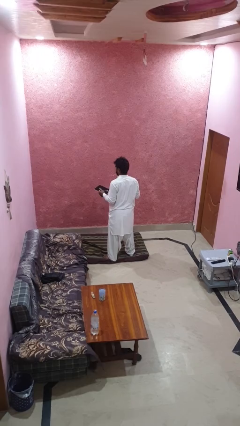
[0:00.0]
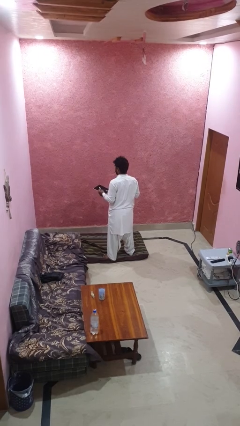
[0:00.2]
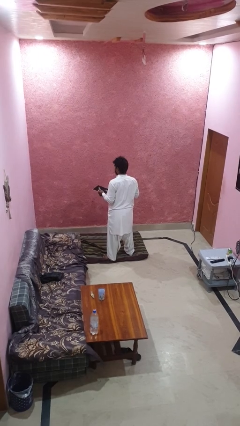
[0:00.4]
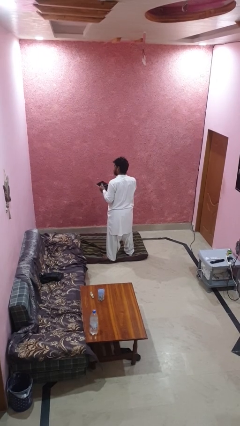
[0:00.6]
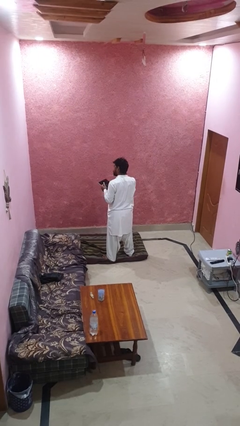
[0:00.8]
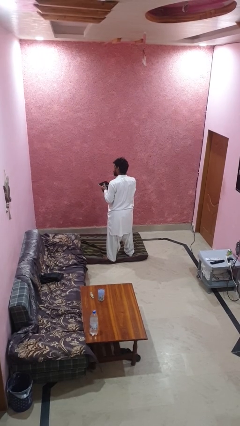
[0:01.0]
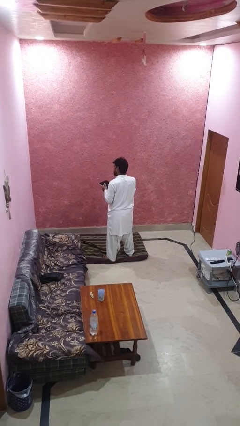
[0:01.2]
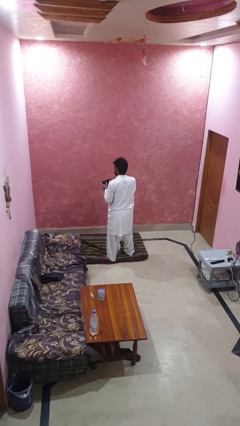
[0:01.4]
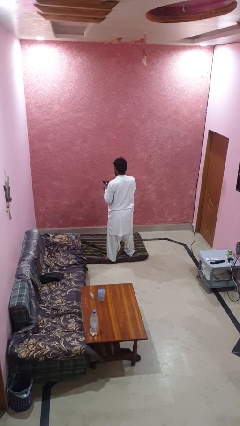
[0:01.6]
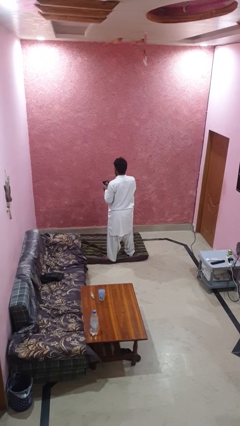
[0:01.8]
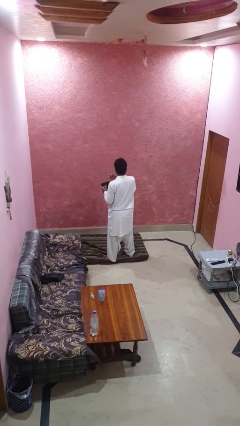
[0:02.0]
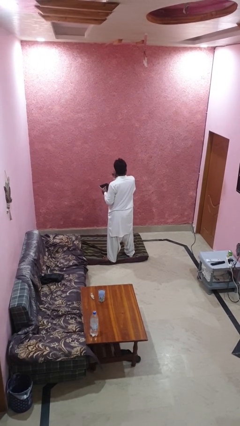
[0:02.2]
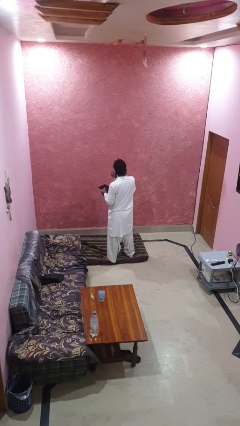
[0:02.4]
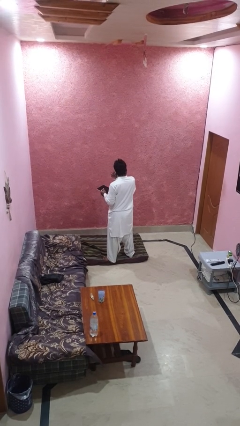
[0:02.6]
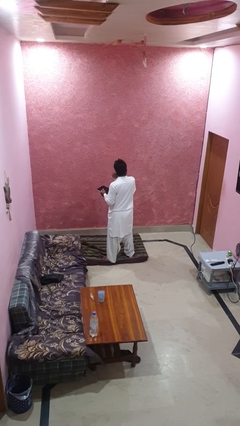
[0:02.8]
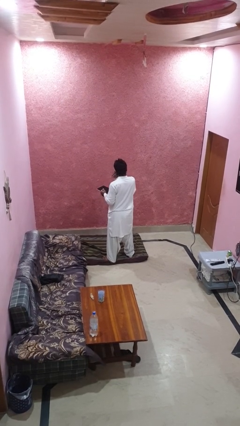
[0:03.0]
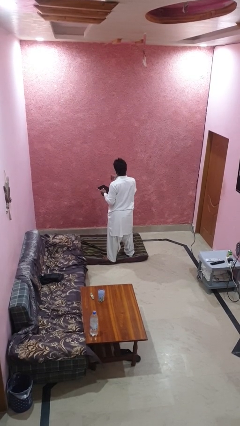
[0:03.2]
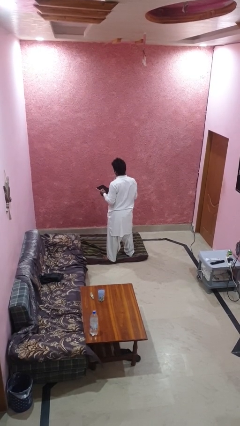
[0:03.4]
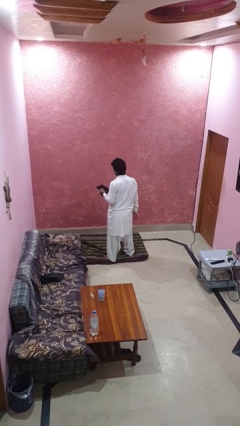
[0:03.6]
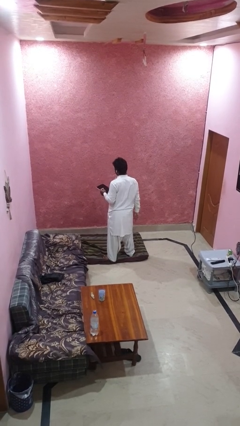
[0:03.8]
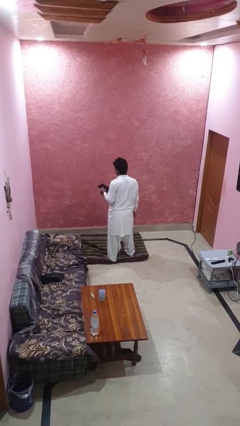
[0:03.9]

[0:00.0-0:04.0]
person puts on headphones

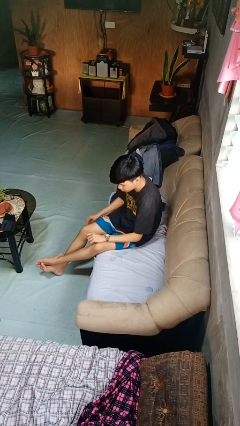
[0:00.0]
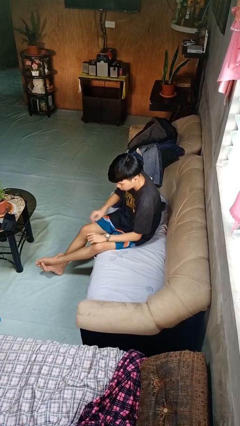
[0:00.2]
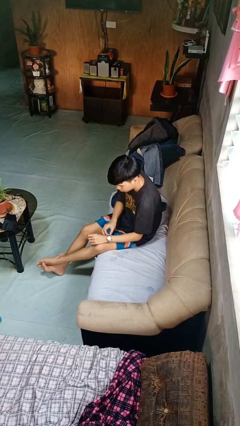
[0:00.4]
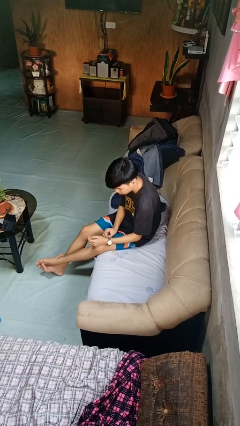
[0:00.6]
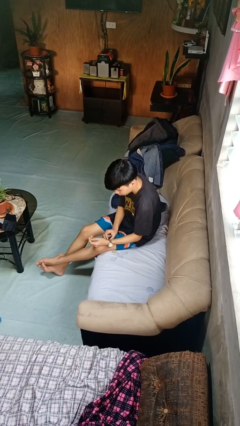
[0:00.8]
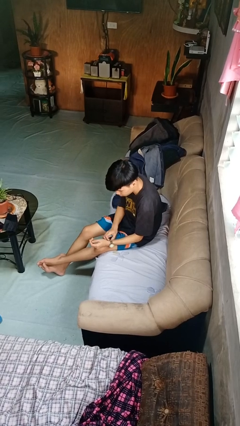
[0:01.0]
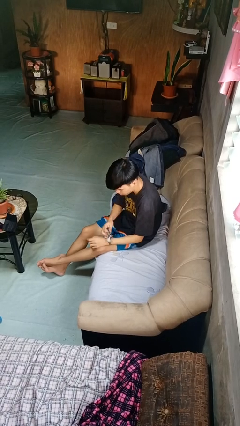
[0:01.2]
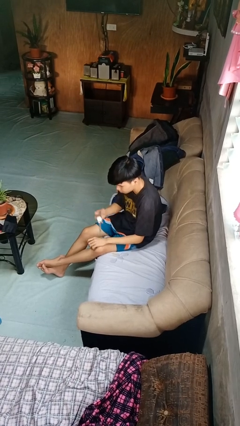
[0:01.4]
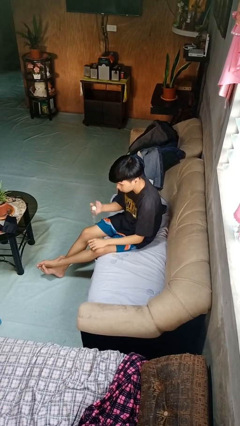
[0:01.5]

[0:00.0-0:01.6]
person takes off wristwatch

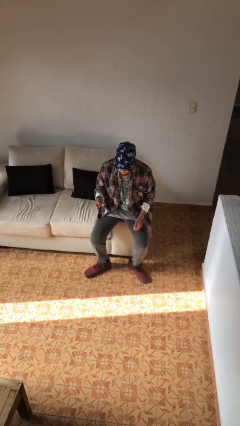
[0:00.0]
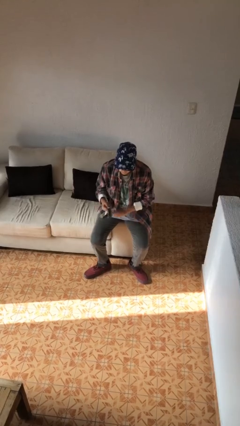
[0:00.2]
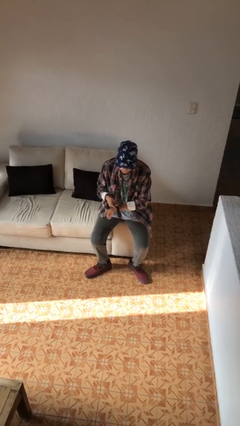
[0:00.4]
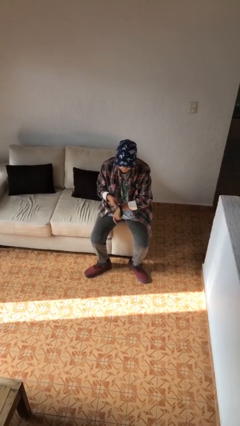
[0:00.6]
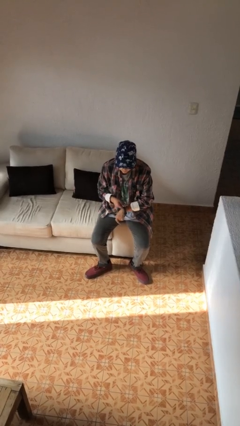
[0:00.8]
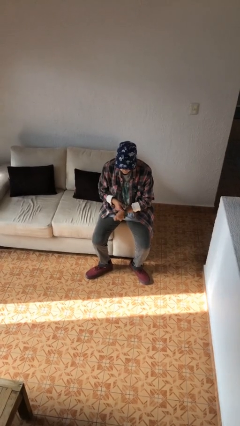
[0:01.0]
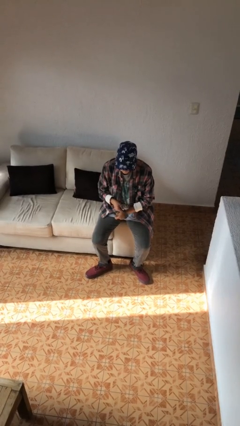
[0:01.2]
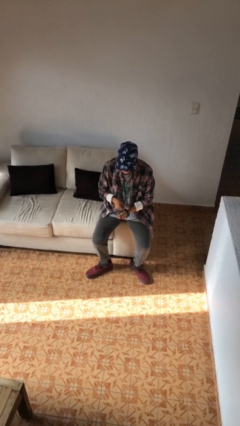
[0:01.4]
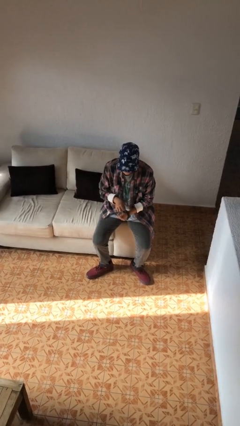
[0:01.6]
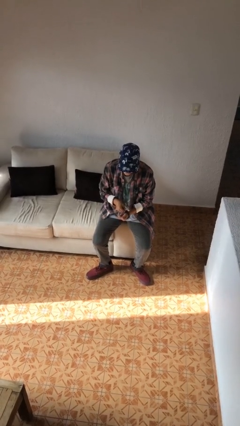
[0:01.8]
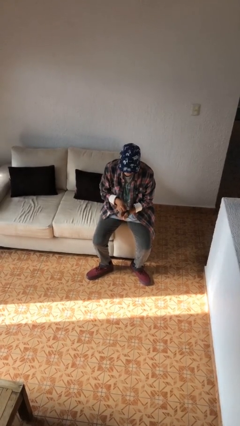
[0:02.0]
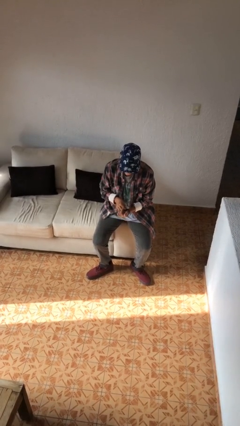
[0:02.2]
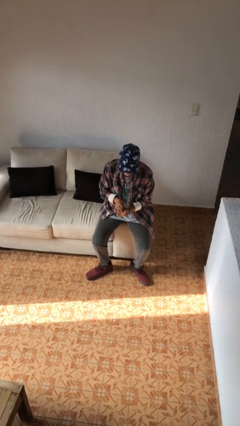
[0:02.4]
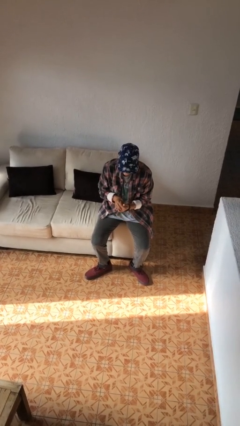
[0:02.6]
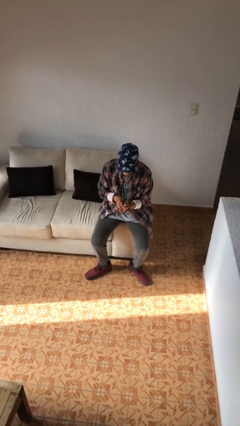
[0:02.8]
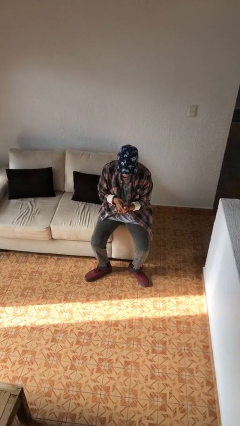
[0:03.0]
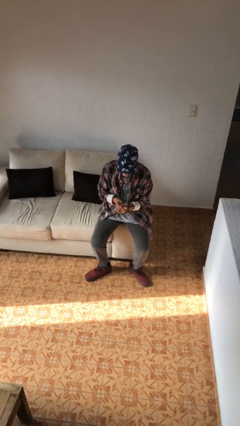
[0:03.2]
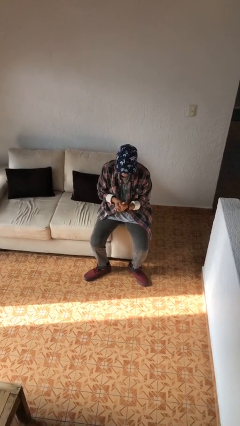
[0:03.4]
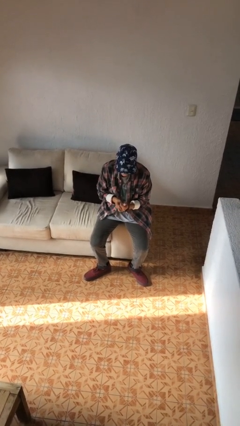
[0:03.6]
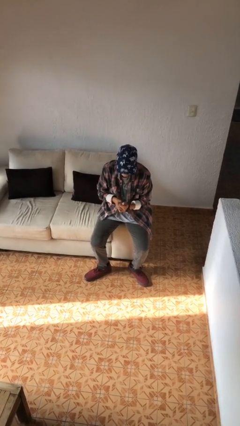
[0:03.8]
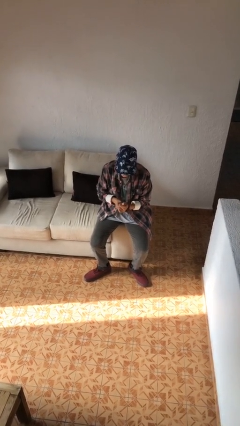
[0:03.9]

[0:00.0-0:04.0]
person puts on wristwatch

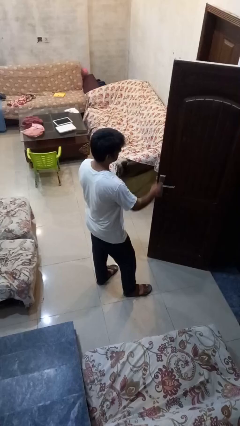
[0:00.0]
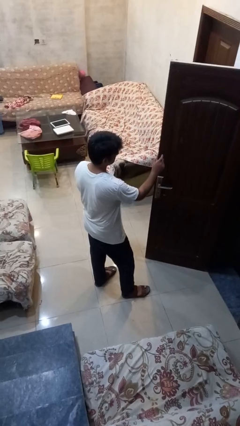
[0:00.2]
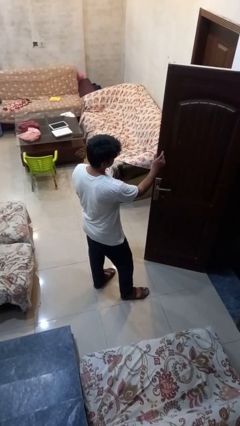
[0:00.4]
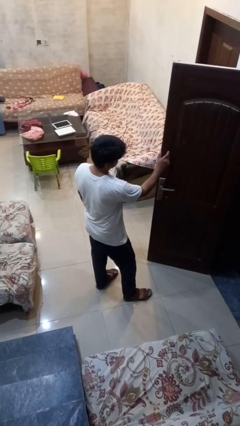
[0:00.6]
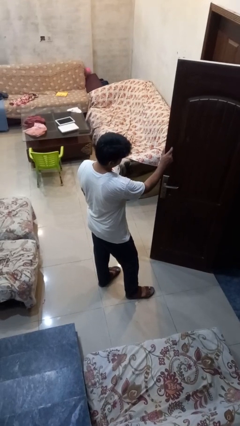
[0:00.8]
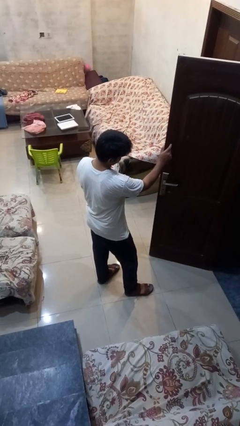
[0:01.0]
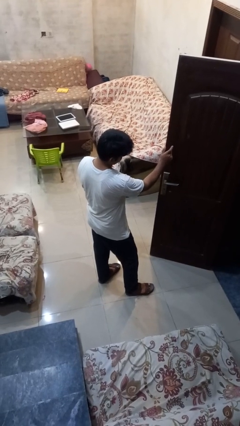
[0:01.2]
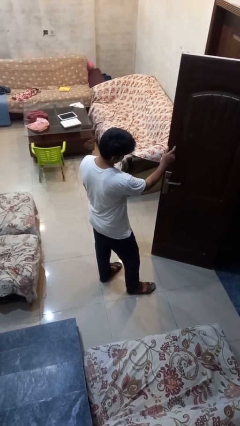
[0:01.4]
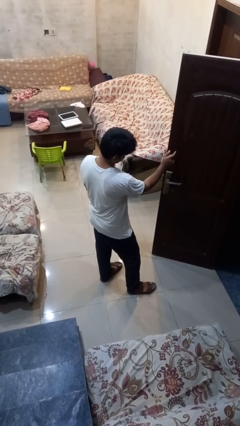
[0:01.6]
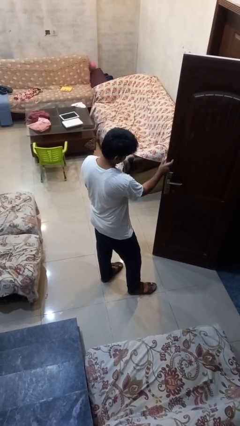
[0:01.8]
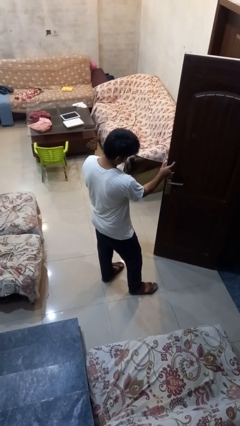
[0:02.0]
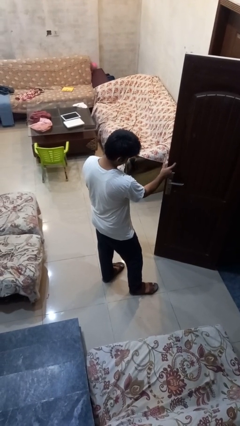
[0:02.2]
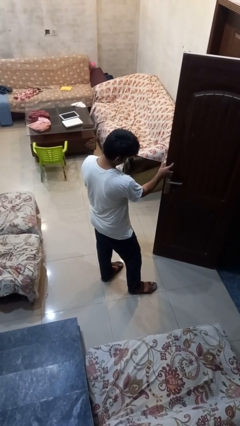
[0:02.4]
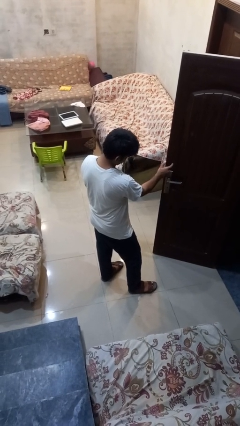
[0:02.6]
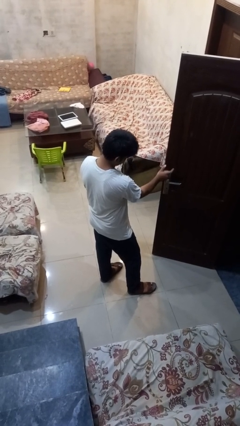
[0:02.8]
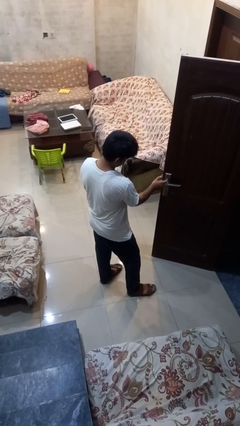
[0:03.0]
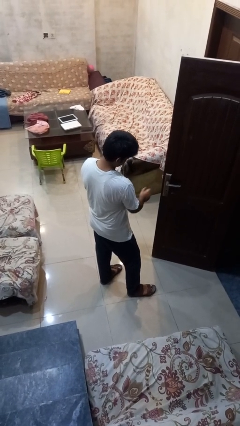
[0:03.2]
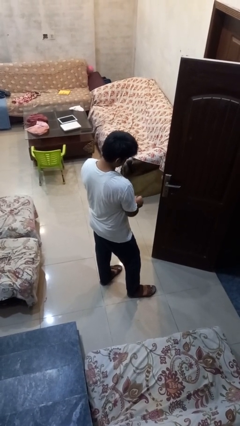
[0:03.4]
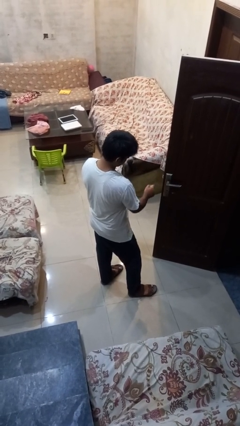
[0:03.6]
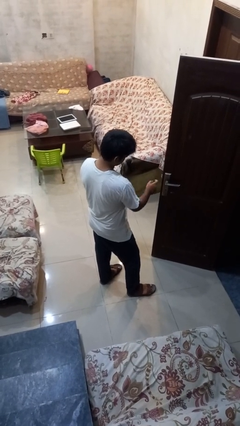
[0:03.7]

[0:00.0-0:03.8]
person taps object with finger

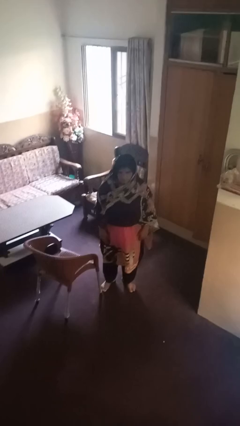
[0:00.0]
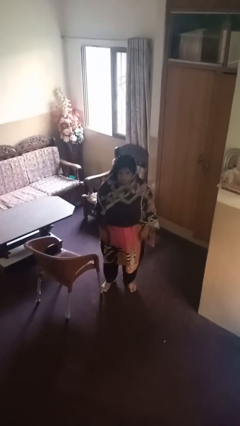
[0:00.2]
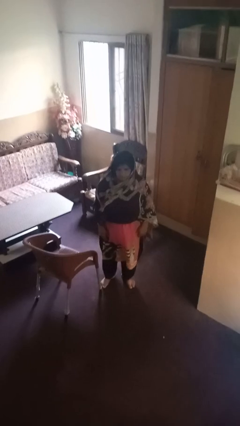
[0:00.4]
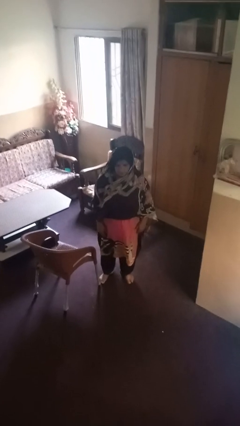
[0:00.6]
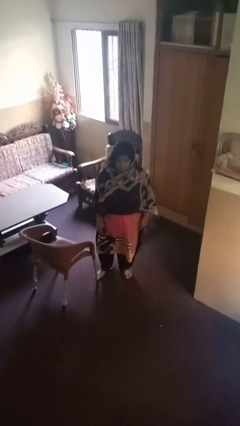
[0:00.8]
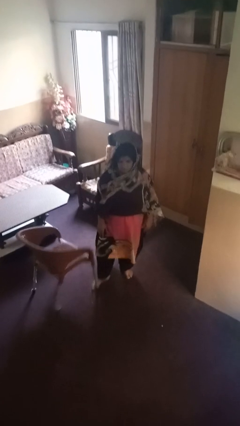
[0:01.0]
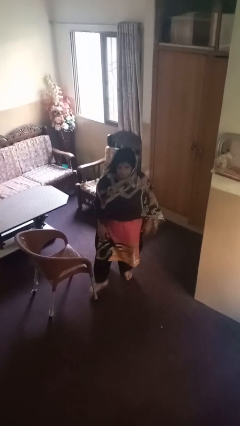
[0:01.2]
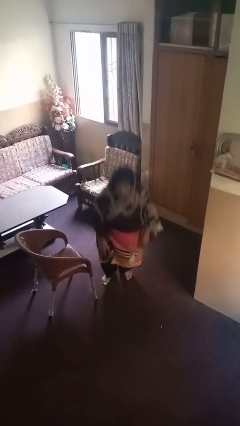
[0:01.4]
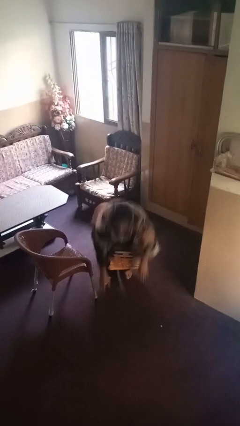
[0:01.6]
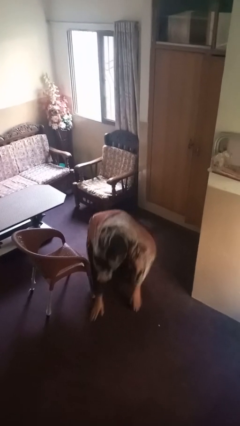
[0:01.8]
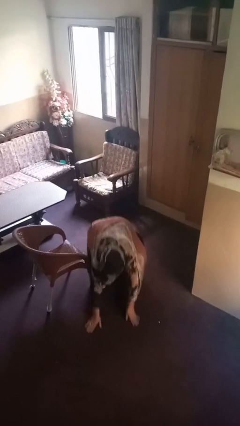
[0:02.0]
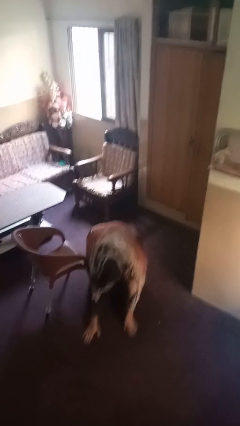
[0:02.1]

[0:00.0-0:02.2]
person trips on object on floor

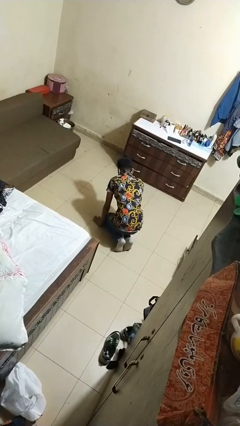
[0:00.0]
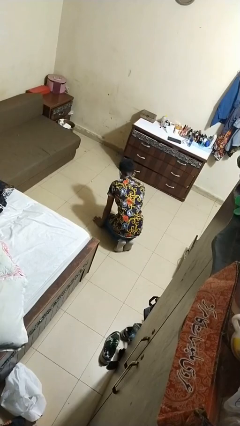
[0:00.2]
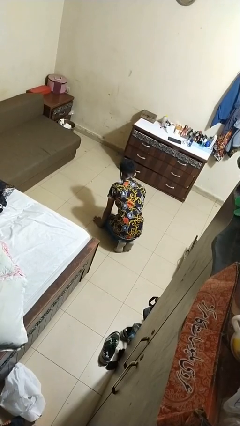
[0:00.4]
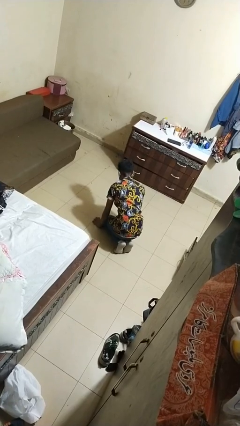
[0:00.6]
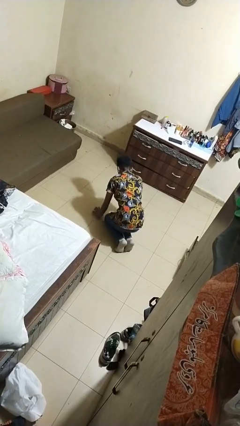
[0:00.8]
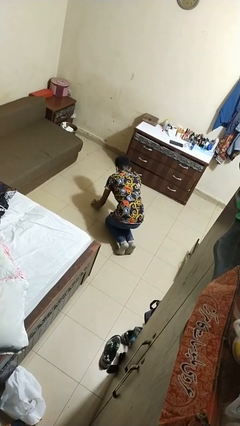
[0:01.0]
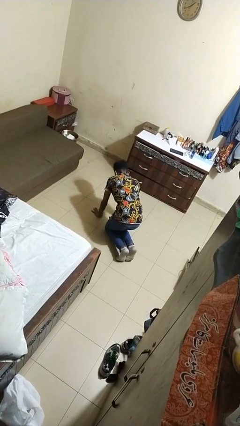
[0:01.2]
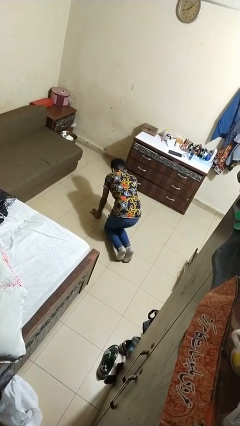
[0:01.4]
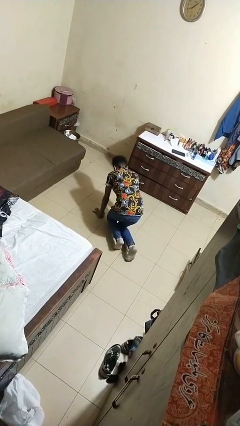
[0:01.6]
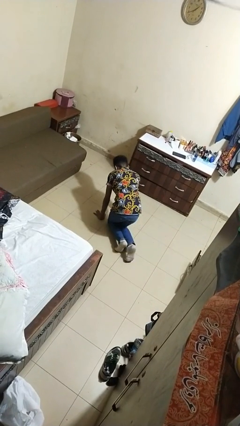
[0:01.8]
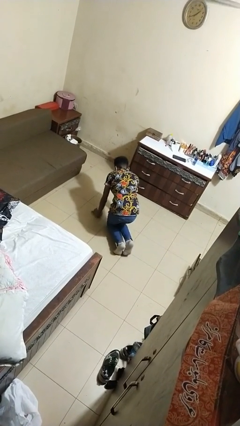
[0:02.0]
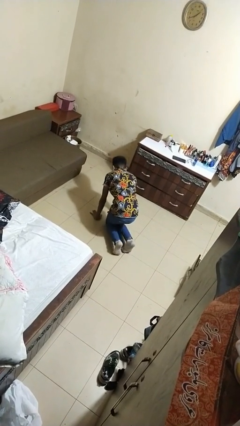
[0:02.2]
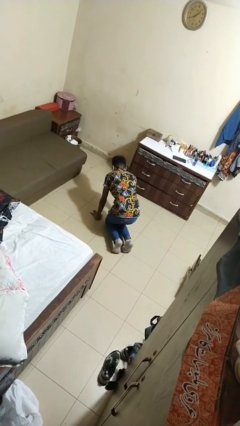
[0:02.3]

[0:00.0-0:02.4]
person crawls
